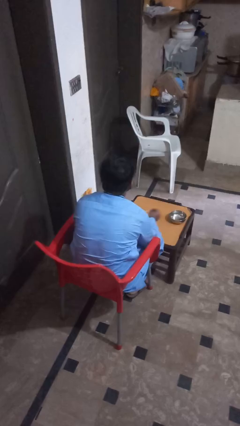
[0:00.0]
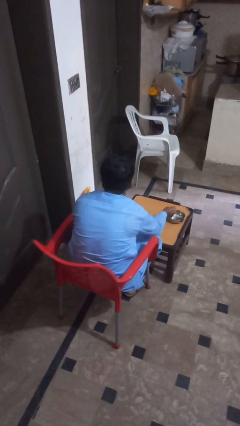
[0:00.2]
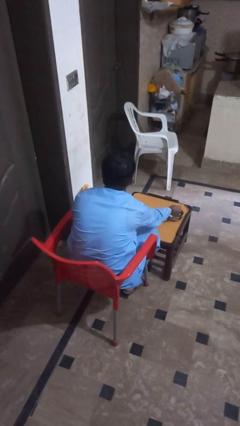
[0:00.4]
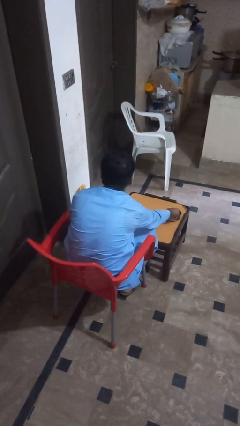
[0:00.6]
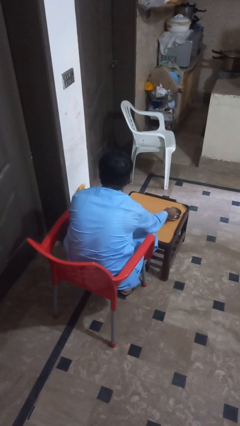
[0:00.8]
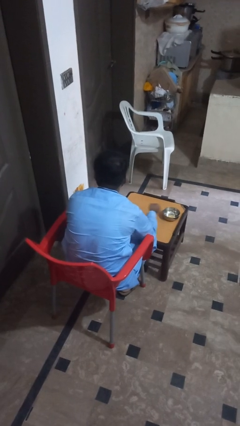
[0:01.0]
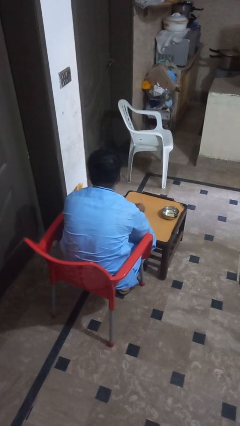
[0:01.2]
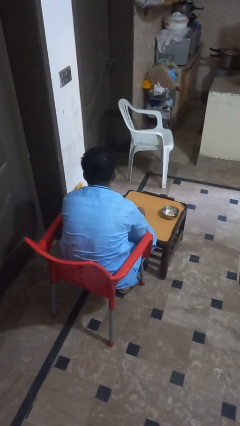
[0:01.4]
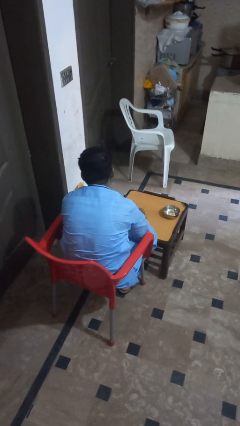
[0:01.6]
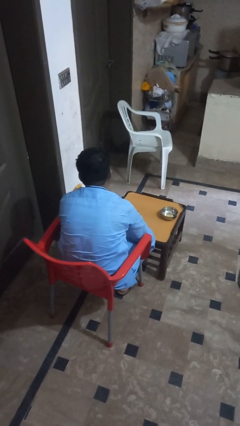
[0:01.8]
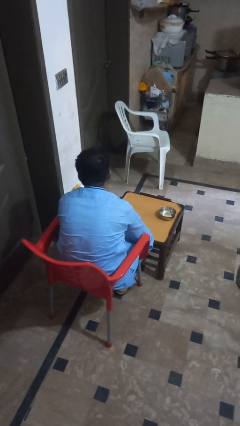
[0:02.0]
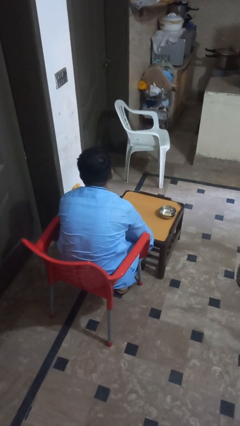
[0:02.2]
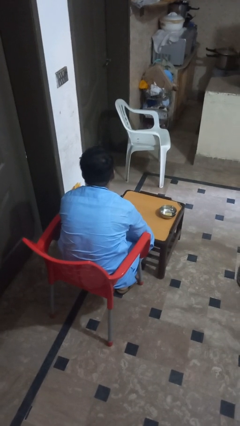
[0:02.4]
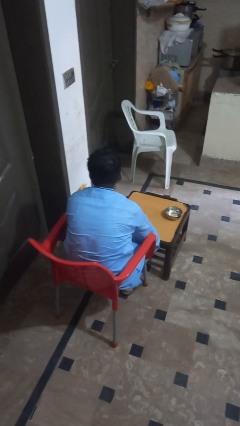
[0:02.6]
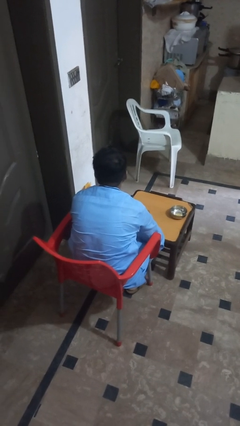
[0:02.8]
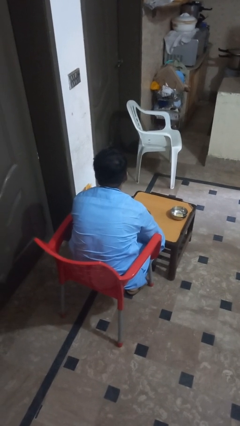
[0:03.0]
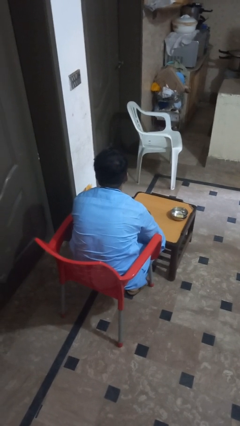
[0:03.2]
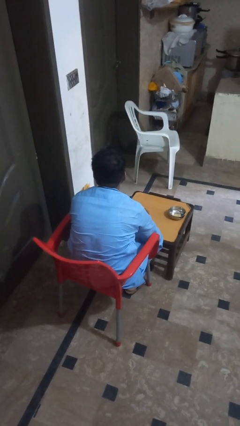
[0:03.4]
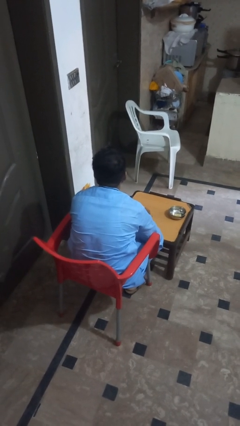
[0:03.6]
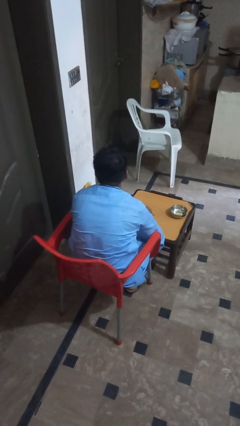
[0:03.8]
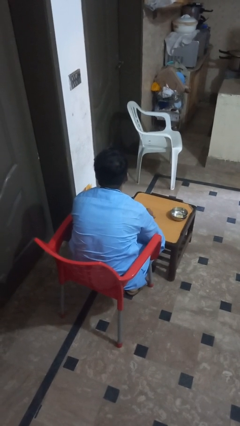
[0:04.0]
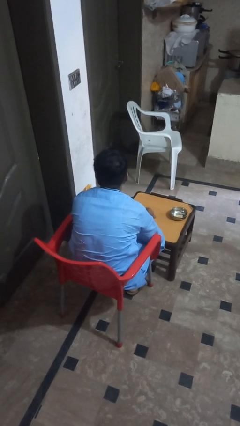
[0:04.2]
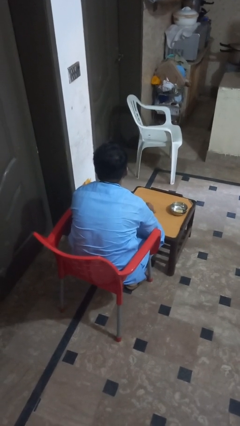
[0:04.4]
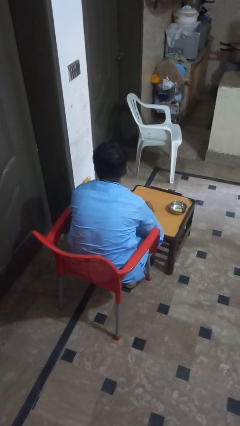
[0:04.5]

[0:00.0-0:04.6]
person pours into bowl

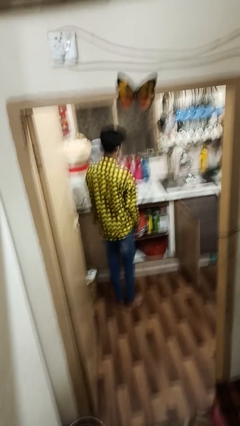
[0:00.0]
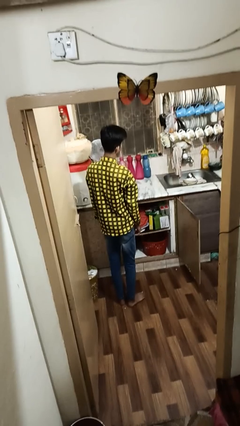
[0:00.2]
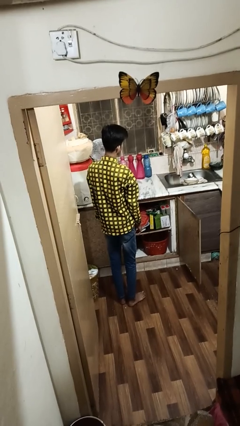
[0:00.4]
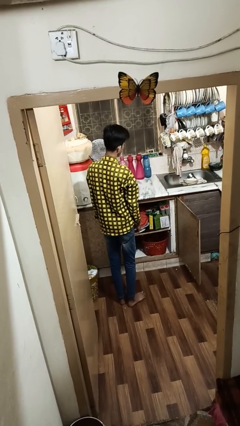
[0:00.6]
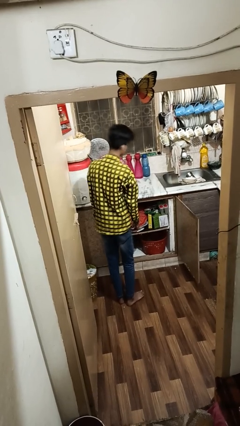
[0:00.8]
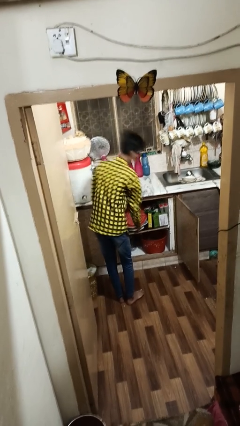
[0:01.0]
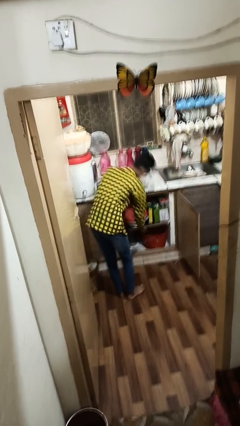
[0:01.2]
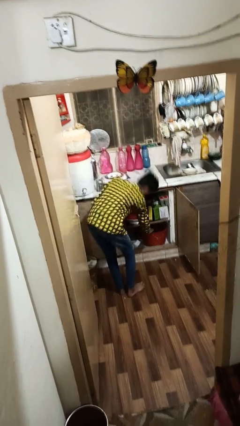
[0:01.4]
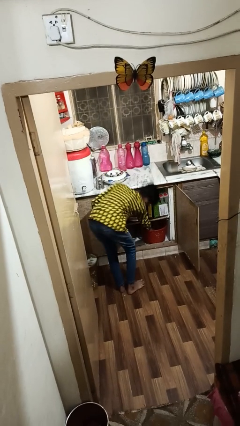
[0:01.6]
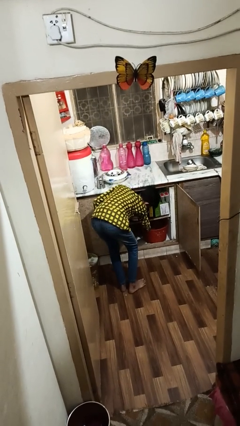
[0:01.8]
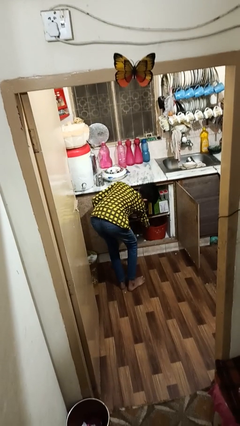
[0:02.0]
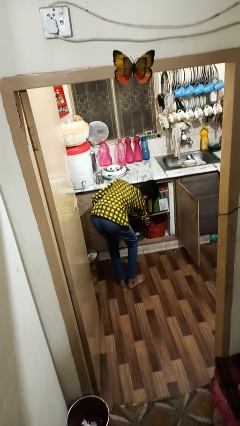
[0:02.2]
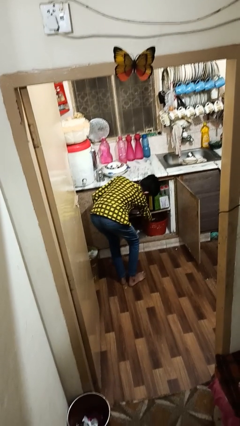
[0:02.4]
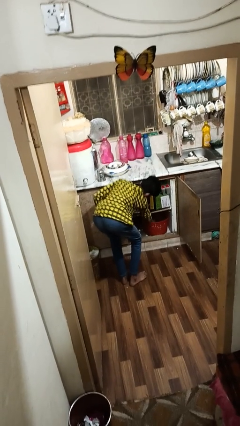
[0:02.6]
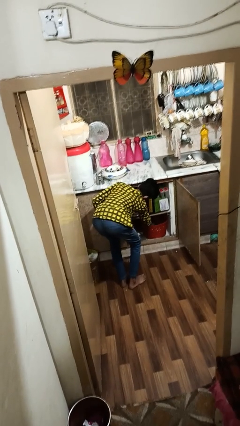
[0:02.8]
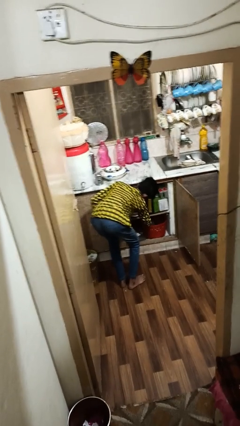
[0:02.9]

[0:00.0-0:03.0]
person takes object from cabinet

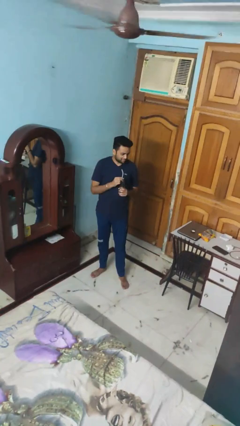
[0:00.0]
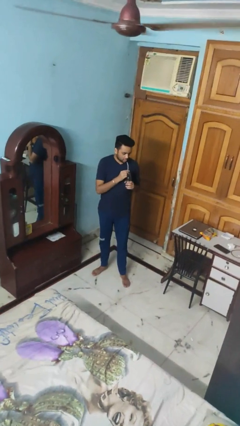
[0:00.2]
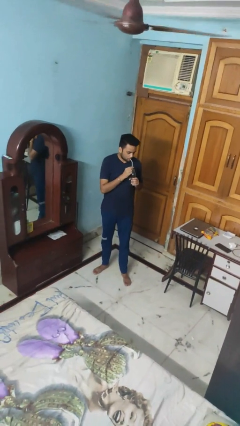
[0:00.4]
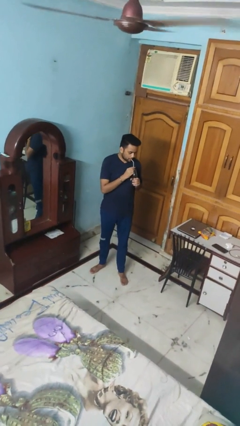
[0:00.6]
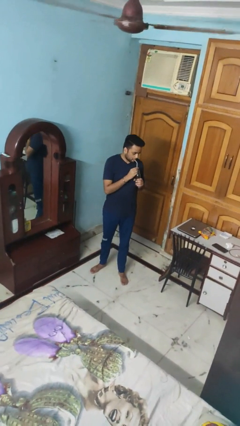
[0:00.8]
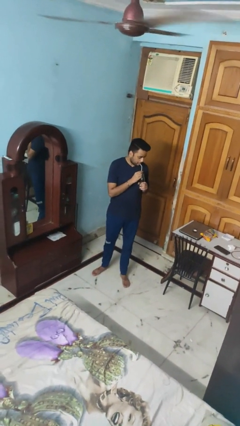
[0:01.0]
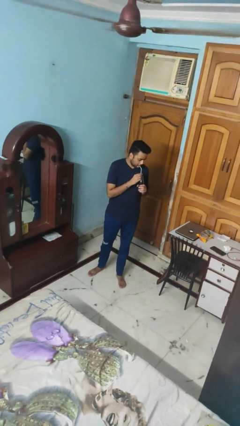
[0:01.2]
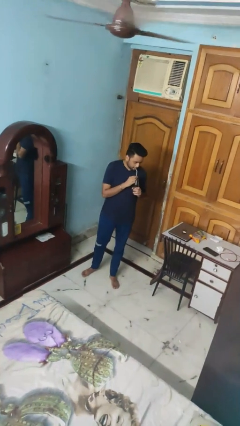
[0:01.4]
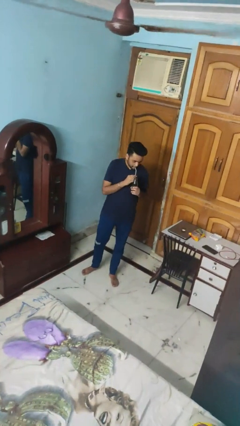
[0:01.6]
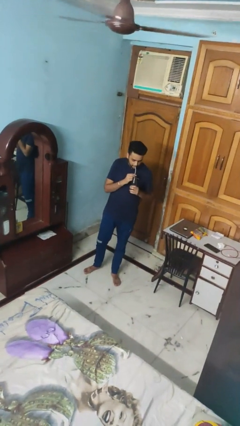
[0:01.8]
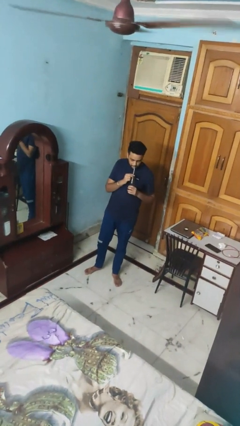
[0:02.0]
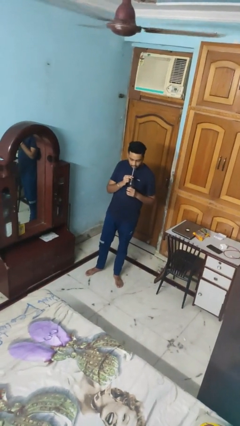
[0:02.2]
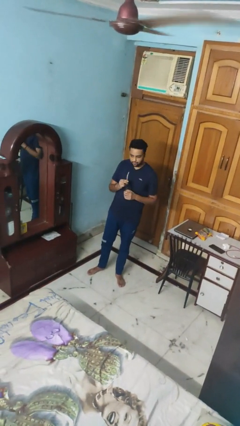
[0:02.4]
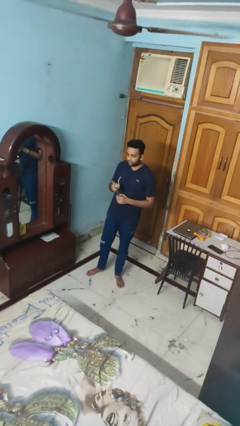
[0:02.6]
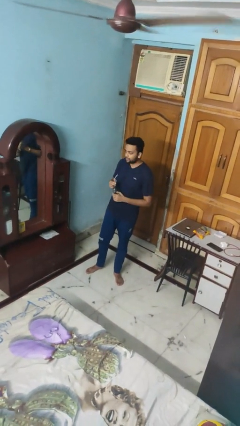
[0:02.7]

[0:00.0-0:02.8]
person drinks from straw

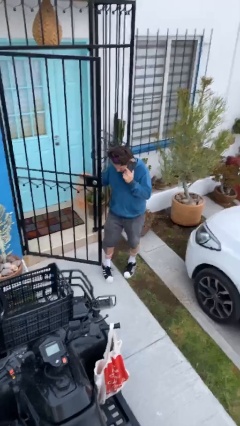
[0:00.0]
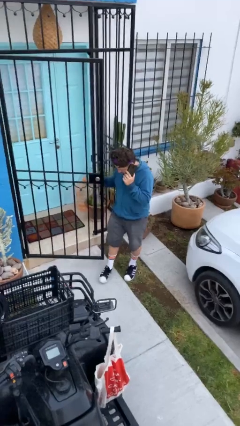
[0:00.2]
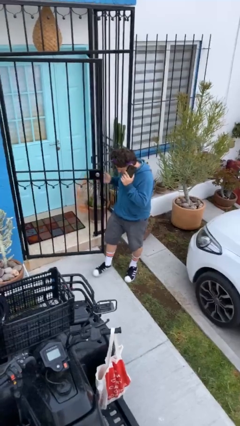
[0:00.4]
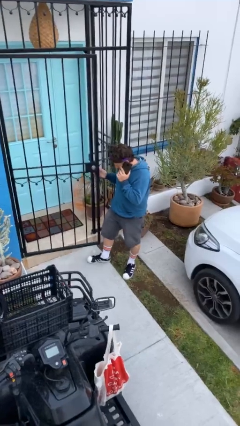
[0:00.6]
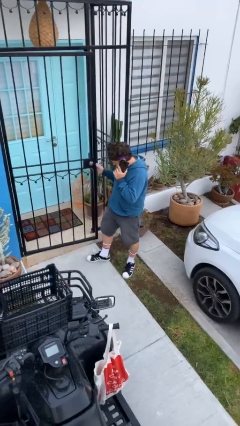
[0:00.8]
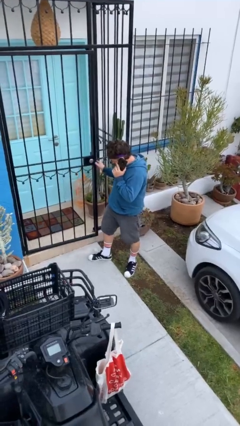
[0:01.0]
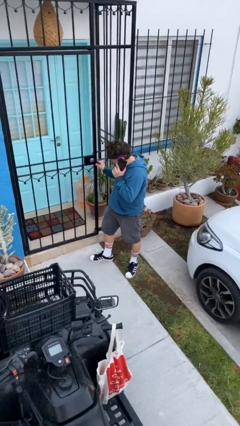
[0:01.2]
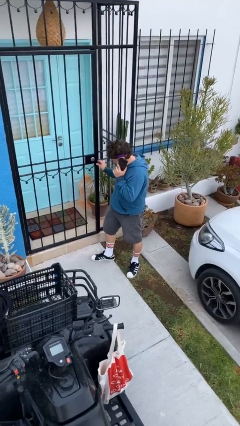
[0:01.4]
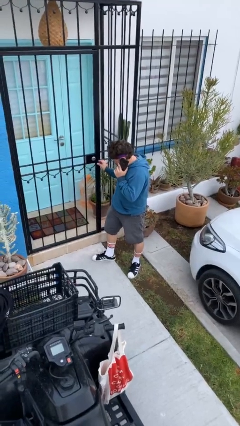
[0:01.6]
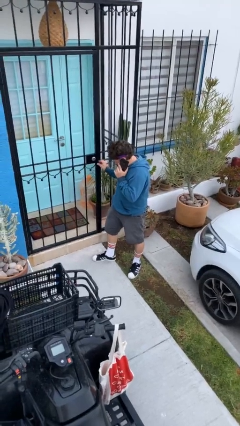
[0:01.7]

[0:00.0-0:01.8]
person closes facility door

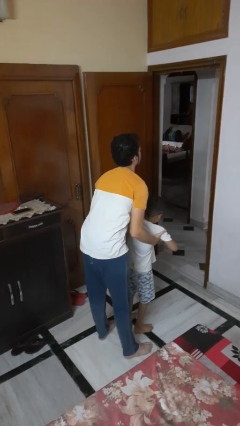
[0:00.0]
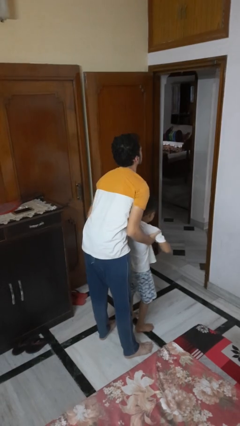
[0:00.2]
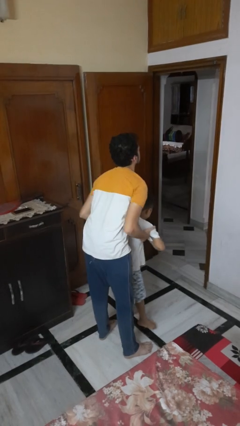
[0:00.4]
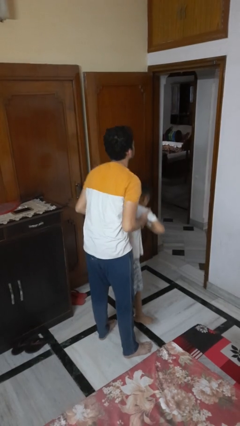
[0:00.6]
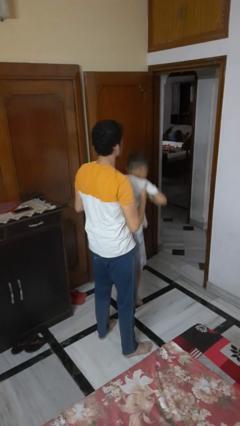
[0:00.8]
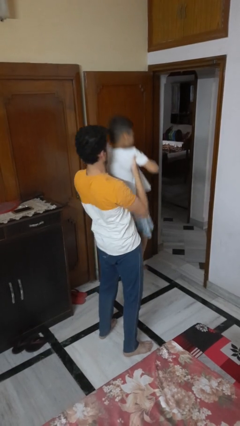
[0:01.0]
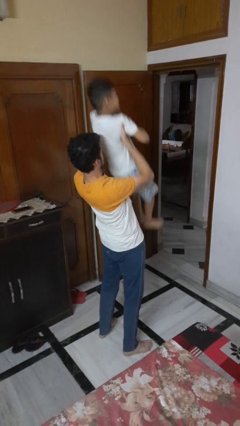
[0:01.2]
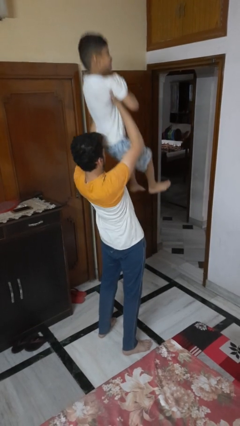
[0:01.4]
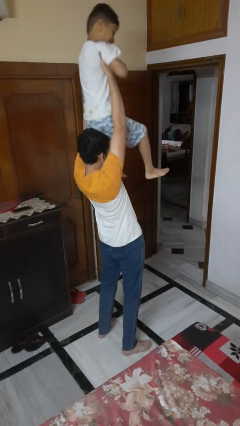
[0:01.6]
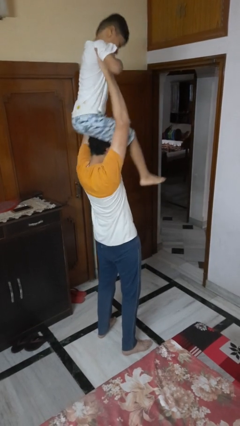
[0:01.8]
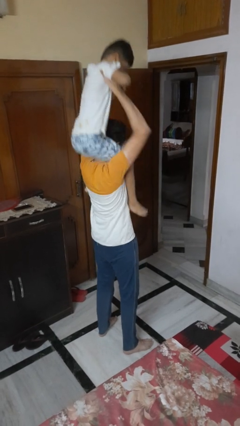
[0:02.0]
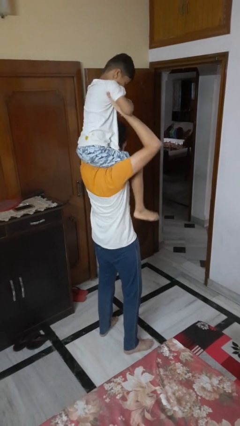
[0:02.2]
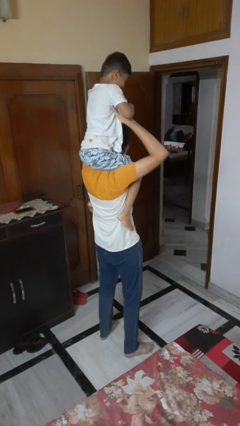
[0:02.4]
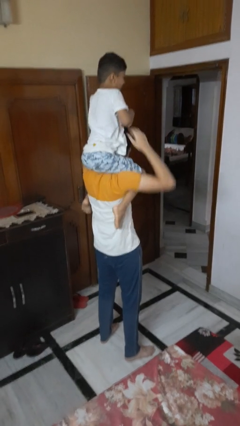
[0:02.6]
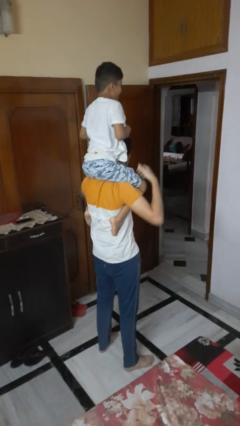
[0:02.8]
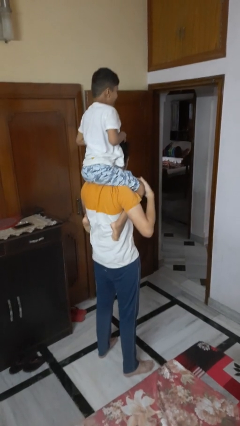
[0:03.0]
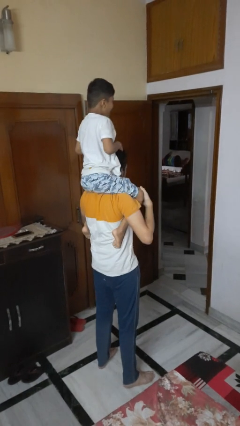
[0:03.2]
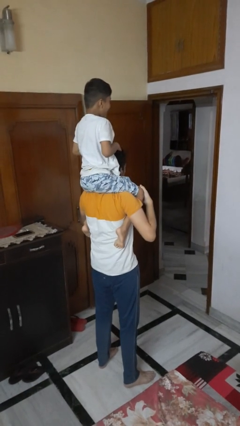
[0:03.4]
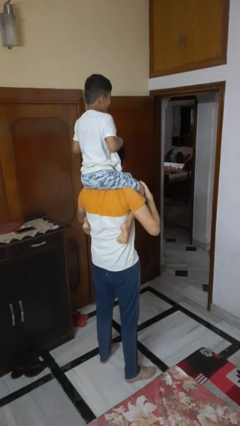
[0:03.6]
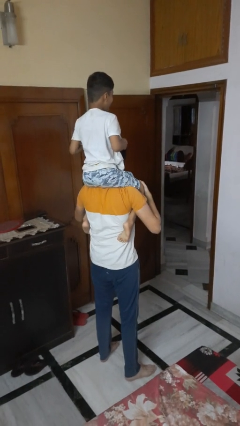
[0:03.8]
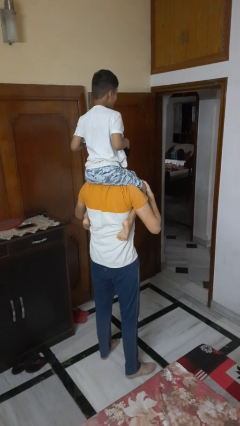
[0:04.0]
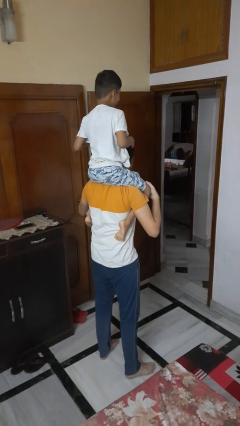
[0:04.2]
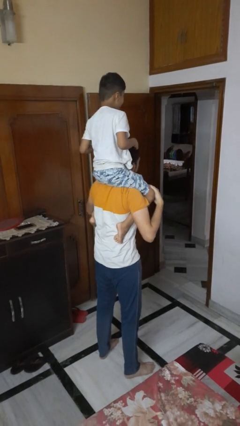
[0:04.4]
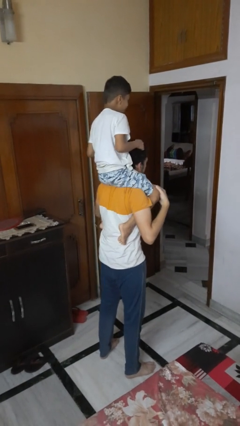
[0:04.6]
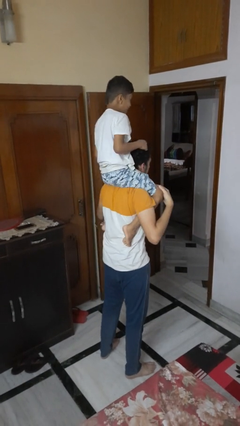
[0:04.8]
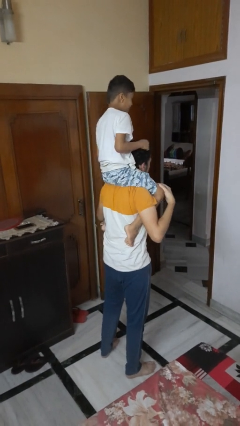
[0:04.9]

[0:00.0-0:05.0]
person carries person over shoulder

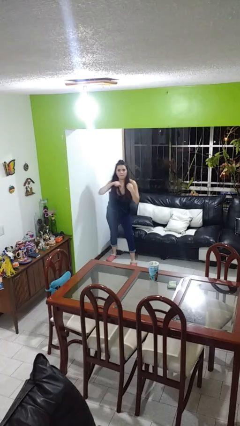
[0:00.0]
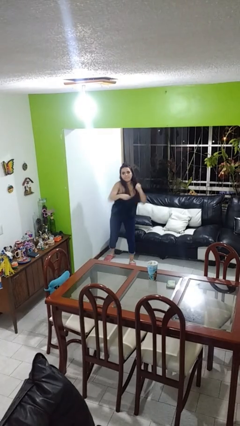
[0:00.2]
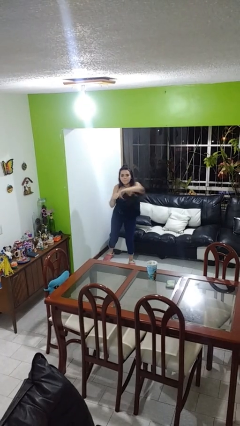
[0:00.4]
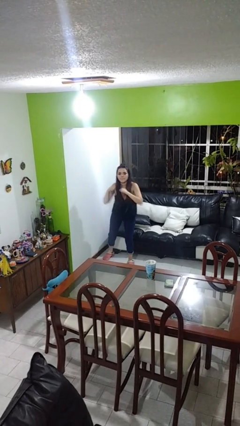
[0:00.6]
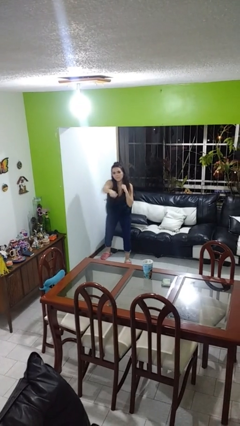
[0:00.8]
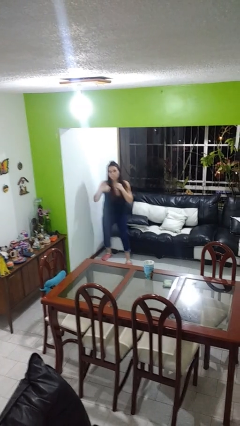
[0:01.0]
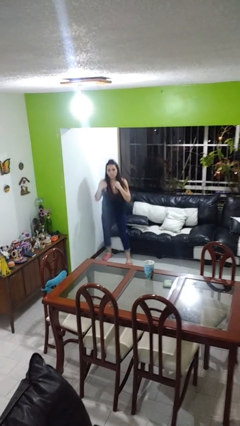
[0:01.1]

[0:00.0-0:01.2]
person punches
